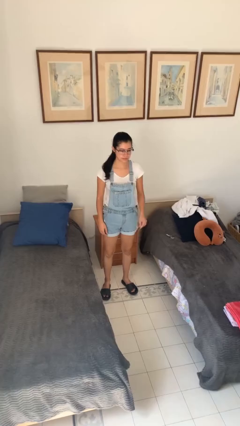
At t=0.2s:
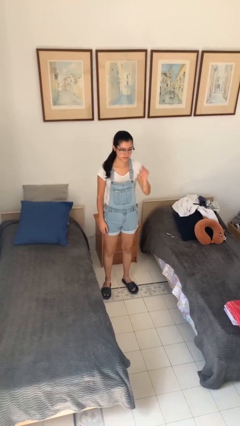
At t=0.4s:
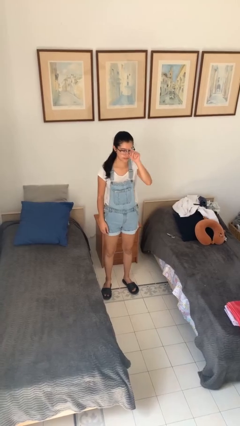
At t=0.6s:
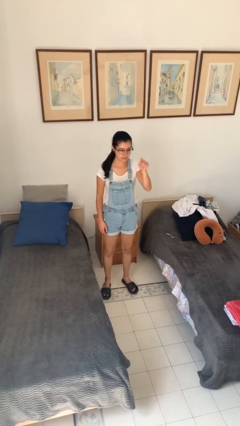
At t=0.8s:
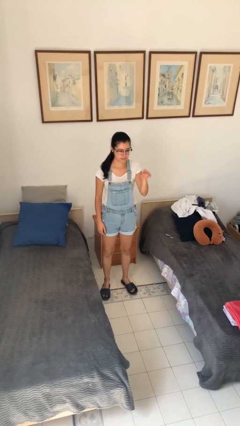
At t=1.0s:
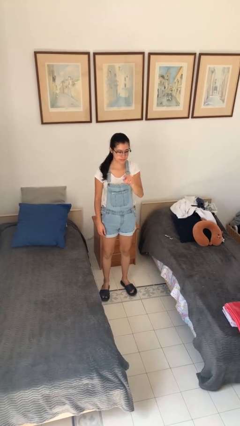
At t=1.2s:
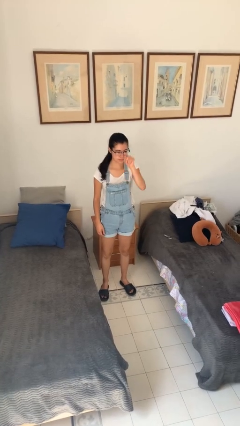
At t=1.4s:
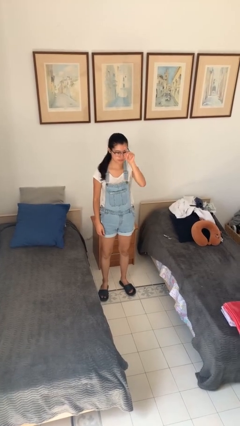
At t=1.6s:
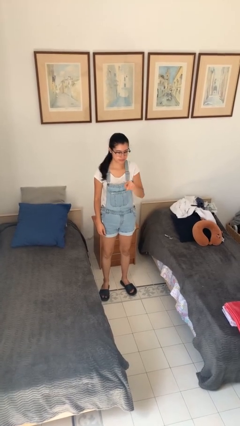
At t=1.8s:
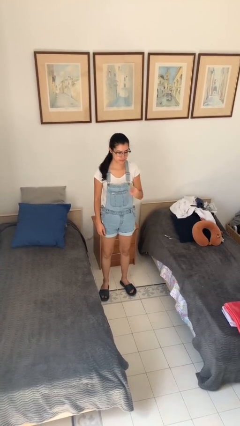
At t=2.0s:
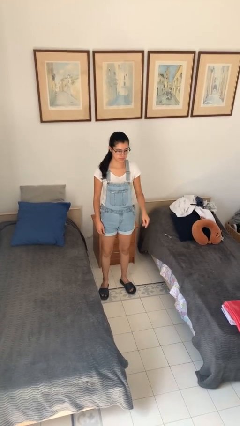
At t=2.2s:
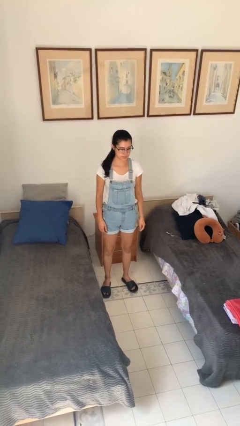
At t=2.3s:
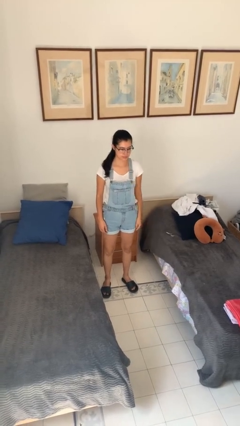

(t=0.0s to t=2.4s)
person gestures number four

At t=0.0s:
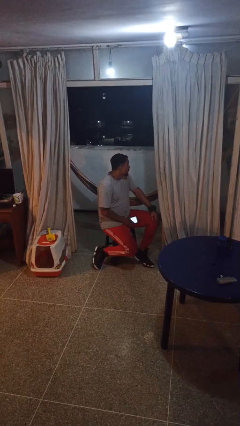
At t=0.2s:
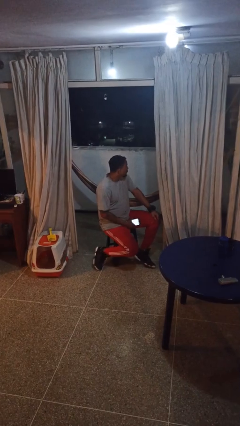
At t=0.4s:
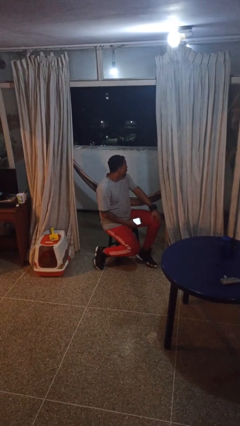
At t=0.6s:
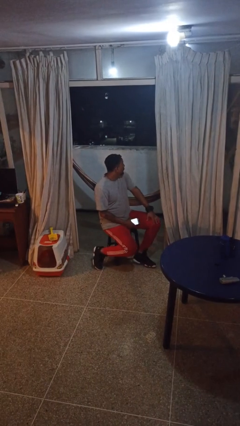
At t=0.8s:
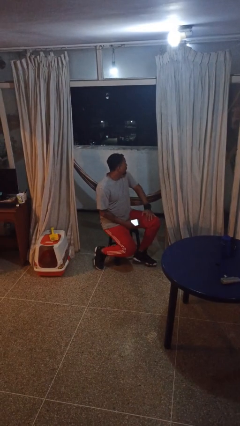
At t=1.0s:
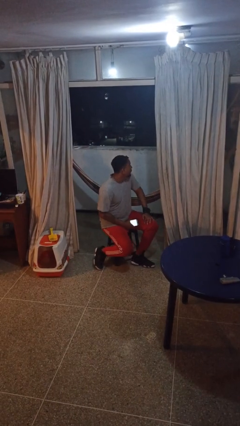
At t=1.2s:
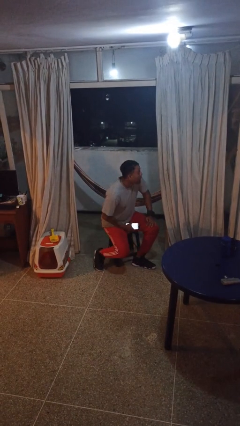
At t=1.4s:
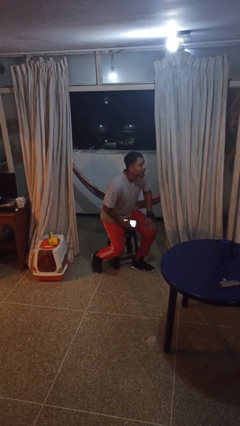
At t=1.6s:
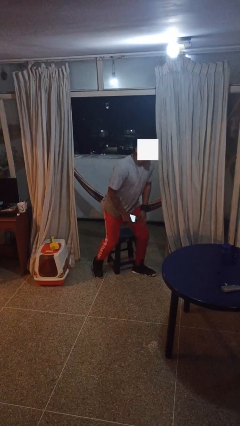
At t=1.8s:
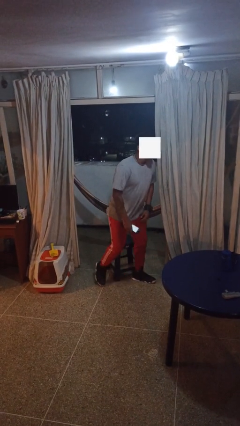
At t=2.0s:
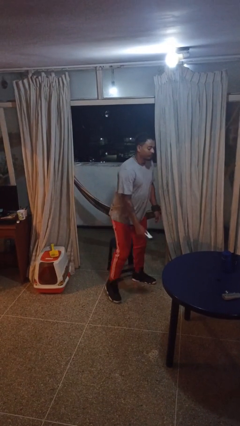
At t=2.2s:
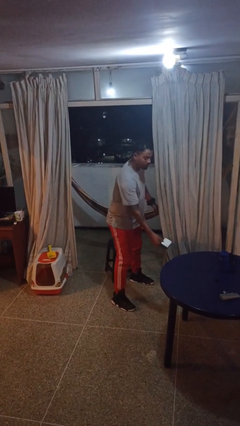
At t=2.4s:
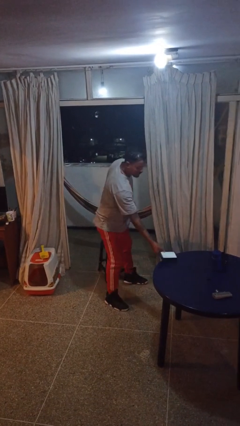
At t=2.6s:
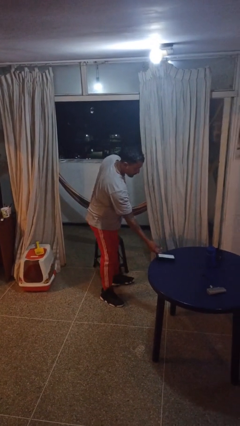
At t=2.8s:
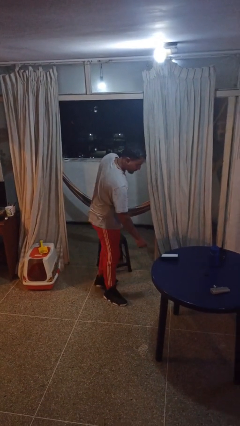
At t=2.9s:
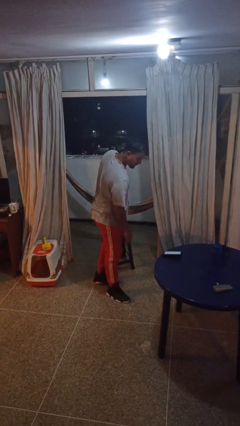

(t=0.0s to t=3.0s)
person stands up

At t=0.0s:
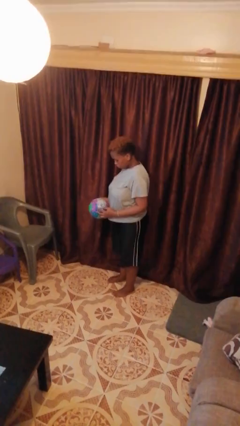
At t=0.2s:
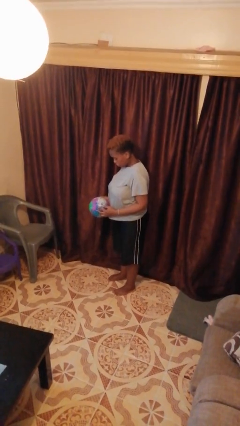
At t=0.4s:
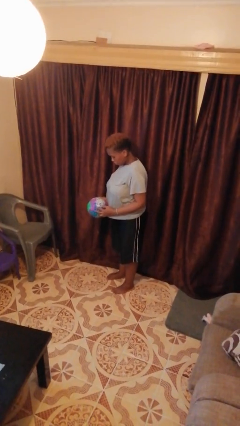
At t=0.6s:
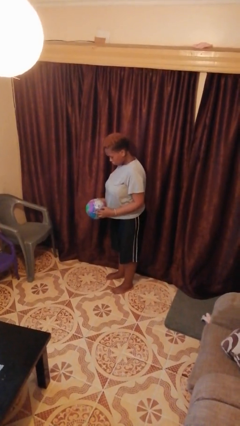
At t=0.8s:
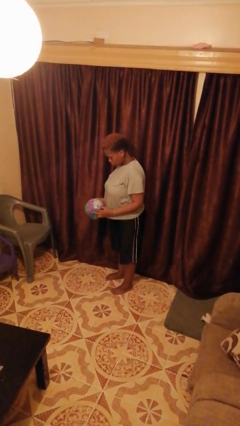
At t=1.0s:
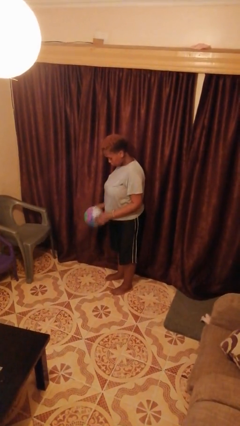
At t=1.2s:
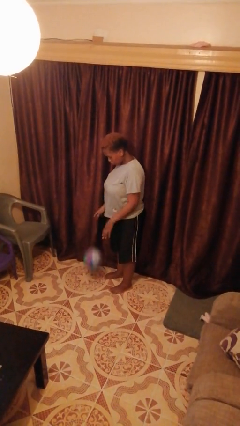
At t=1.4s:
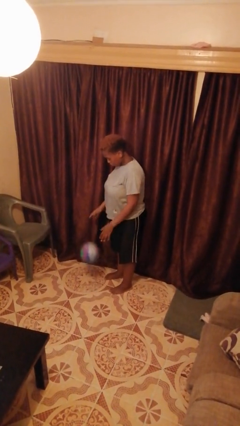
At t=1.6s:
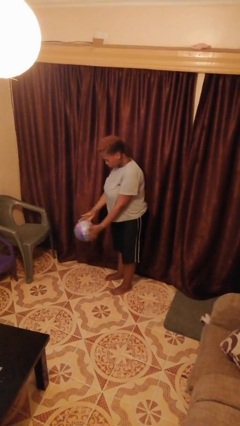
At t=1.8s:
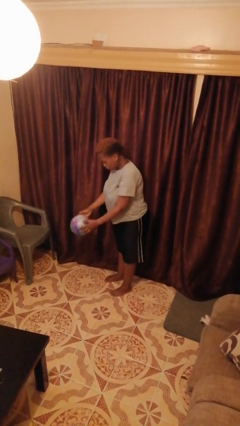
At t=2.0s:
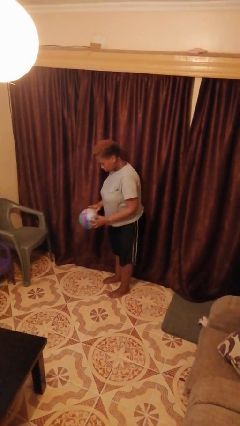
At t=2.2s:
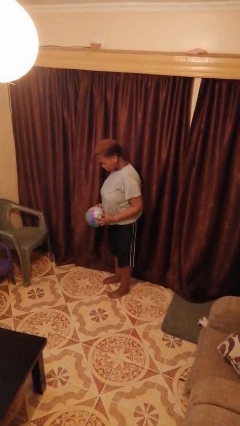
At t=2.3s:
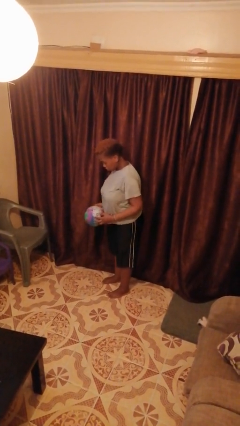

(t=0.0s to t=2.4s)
person bounces ball on floor

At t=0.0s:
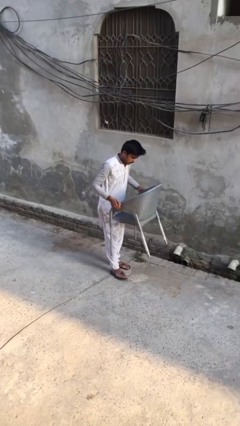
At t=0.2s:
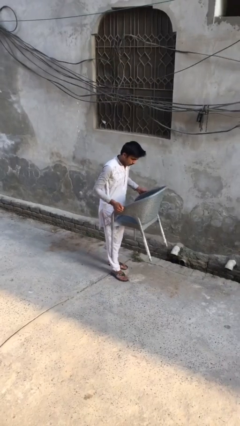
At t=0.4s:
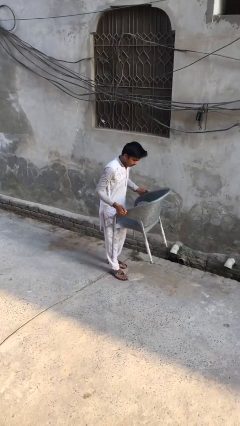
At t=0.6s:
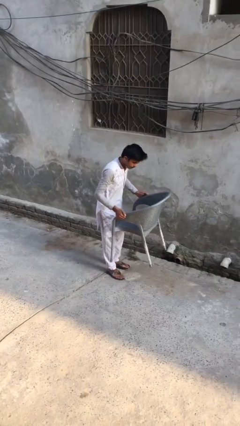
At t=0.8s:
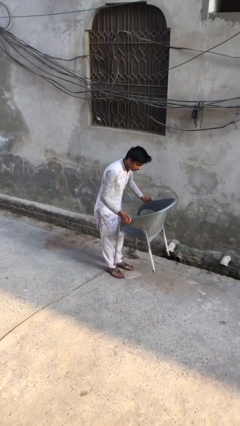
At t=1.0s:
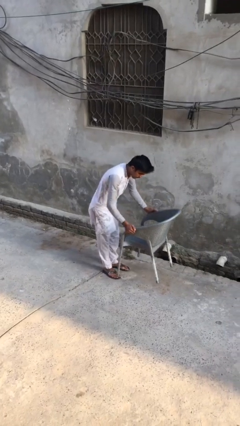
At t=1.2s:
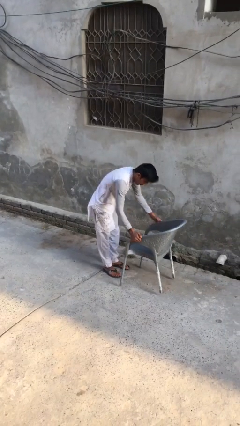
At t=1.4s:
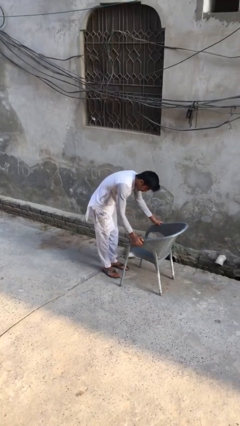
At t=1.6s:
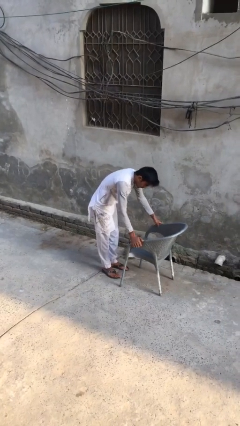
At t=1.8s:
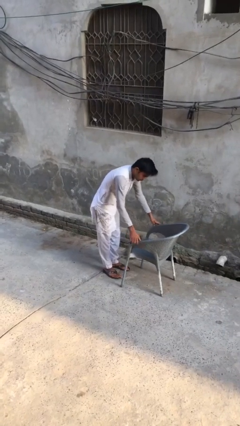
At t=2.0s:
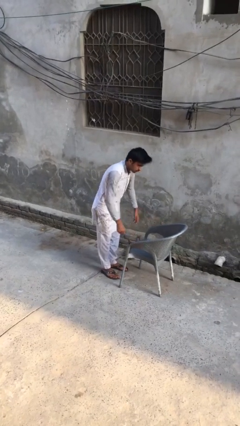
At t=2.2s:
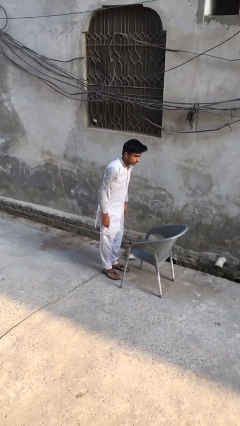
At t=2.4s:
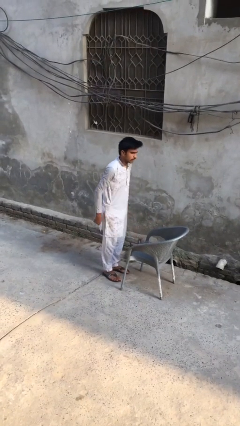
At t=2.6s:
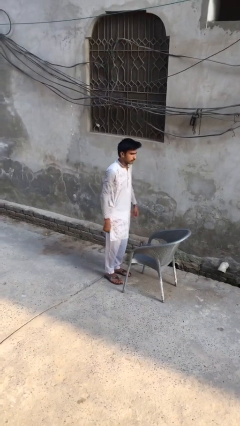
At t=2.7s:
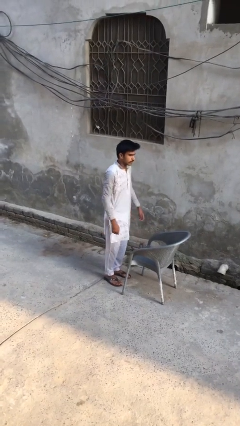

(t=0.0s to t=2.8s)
person puts down object on floor

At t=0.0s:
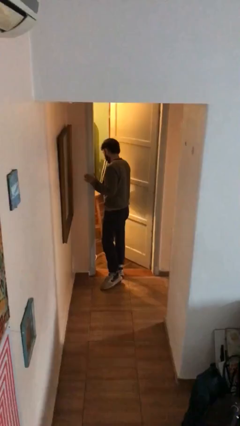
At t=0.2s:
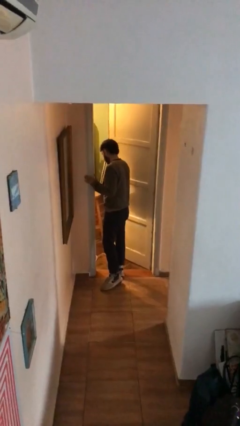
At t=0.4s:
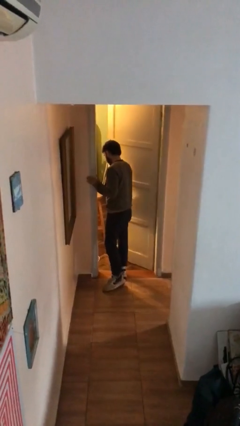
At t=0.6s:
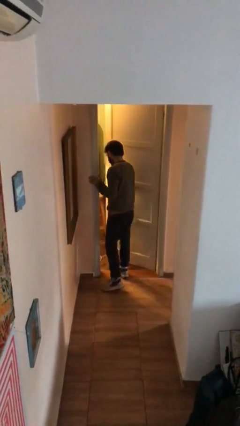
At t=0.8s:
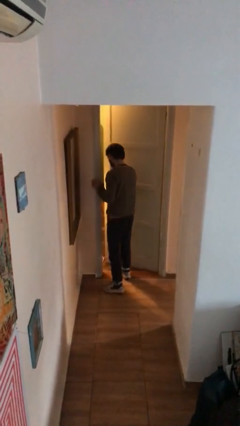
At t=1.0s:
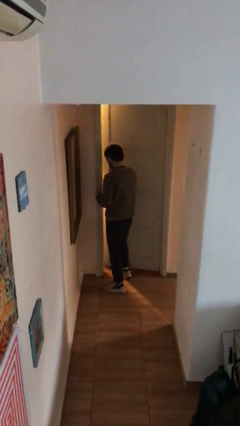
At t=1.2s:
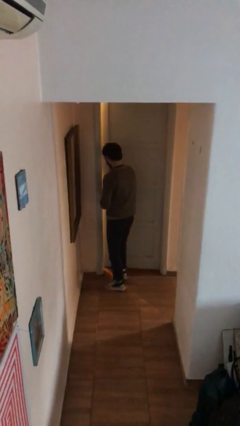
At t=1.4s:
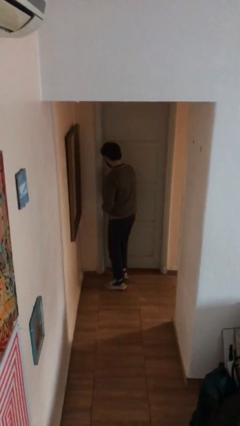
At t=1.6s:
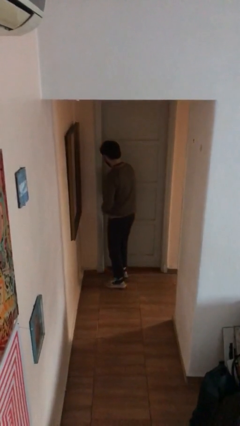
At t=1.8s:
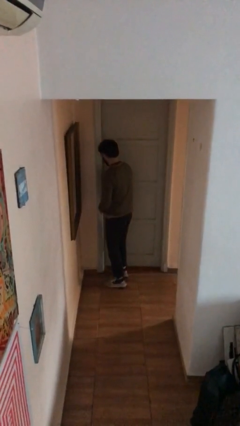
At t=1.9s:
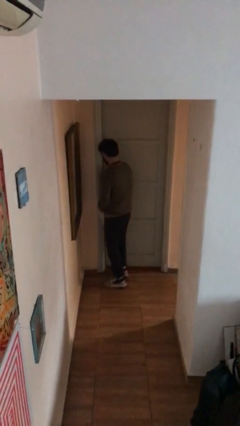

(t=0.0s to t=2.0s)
person closes facility door

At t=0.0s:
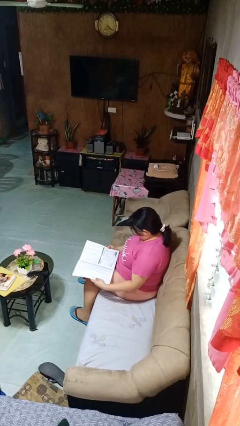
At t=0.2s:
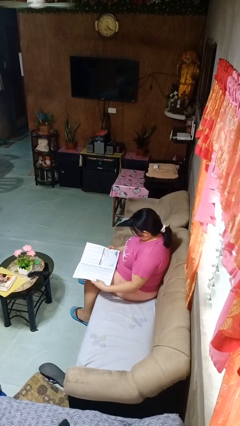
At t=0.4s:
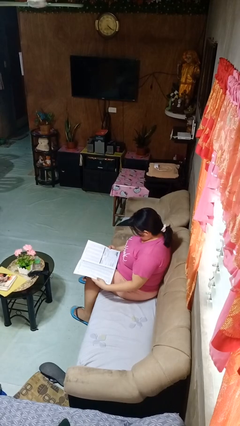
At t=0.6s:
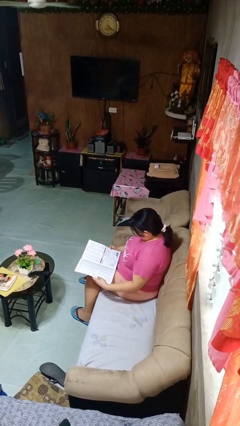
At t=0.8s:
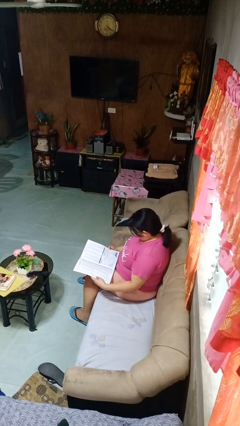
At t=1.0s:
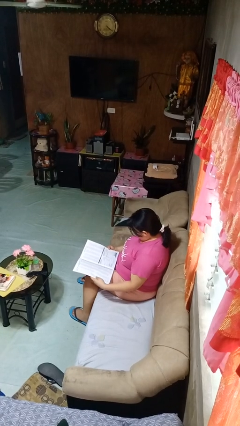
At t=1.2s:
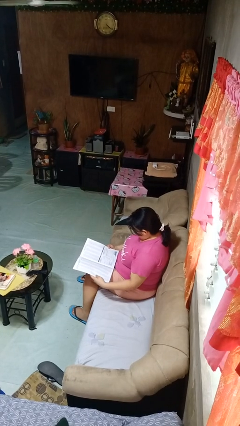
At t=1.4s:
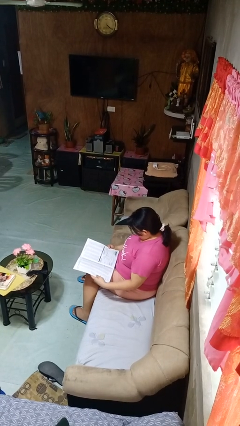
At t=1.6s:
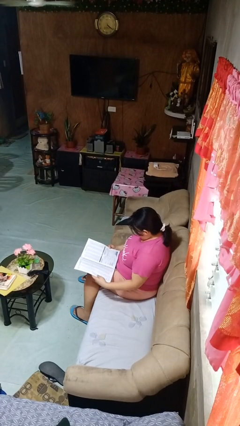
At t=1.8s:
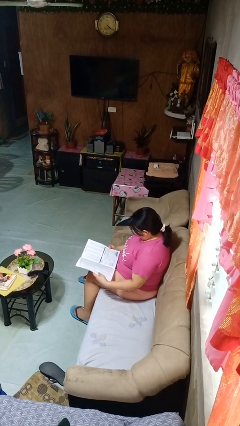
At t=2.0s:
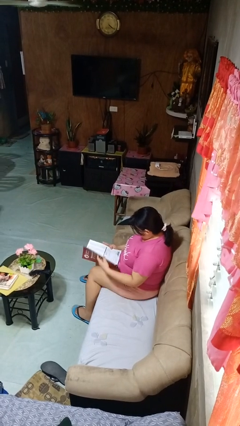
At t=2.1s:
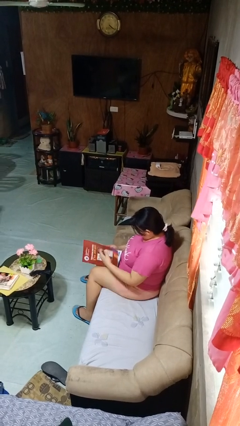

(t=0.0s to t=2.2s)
person reads magazine

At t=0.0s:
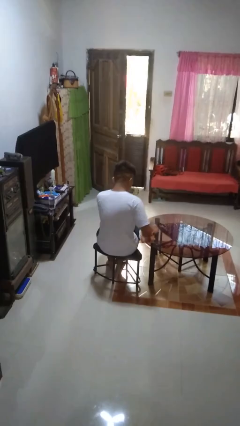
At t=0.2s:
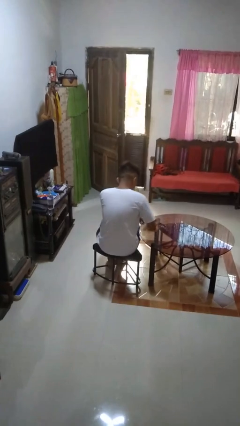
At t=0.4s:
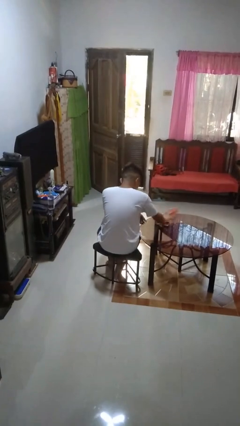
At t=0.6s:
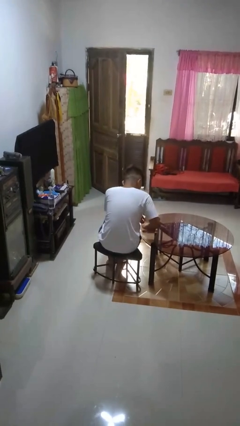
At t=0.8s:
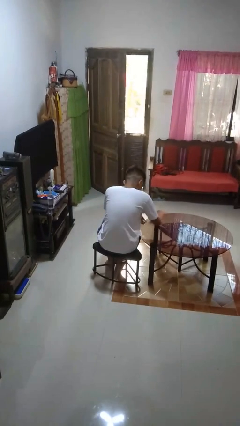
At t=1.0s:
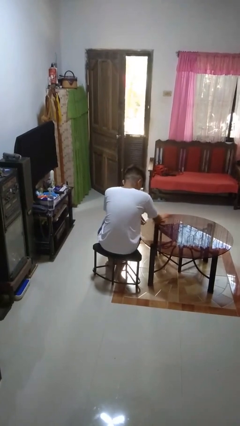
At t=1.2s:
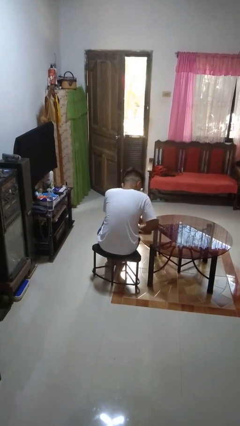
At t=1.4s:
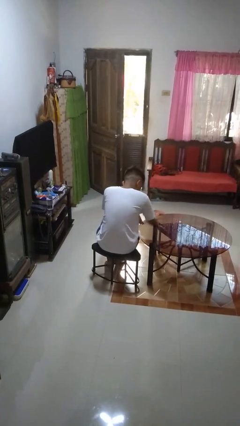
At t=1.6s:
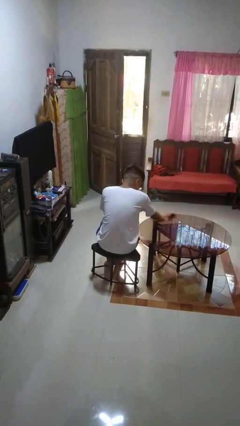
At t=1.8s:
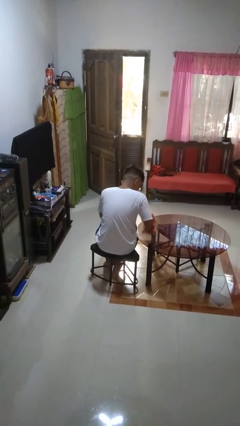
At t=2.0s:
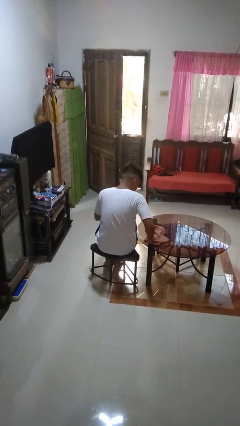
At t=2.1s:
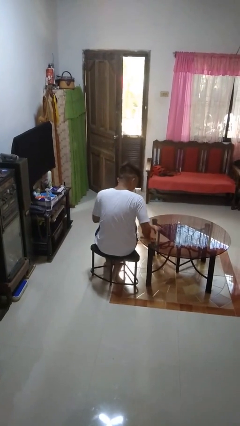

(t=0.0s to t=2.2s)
person cleans table with rag

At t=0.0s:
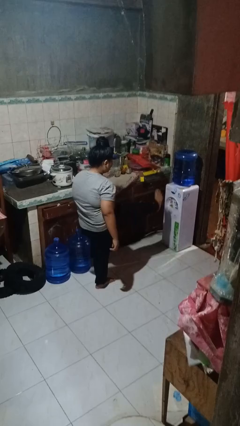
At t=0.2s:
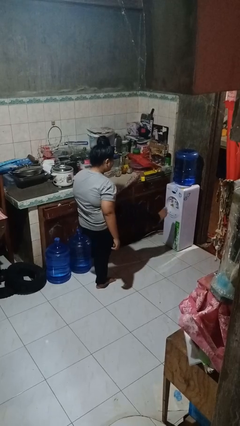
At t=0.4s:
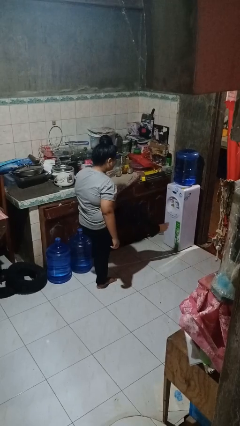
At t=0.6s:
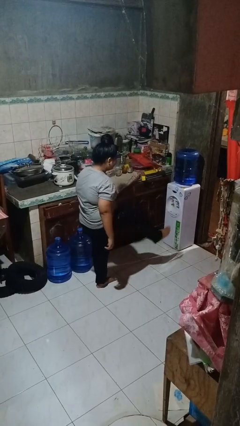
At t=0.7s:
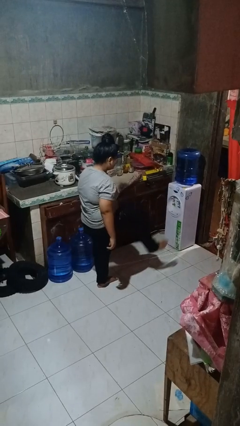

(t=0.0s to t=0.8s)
person karate kicks
